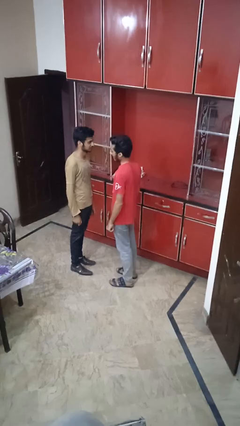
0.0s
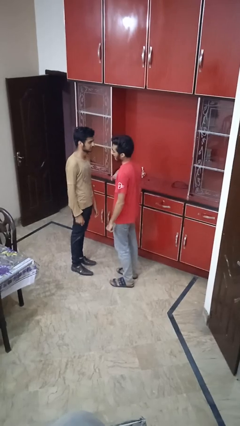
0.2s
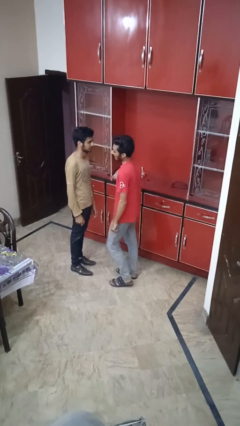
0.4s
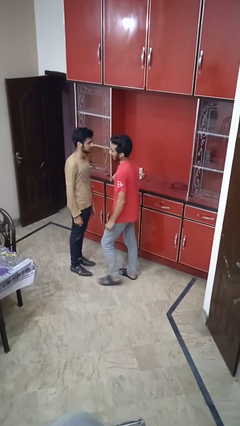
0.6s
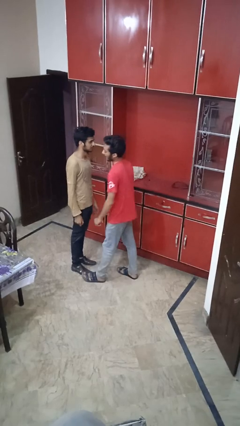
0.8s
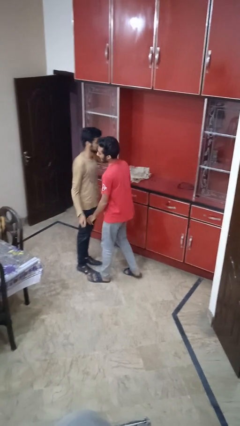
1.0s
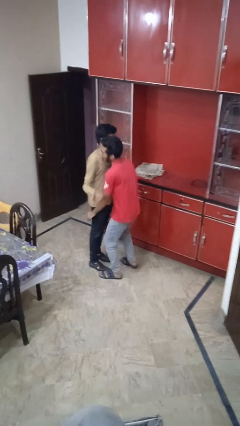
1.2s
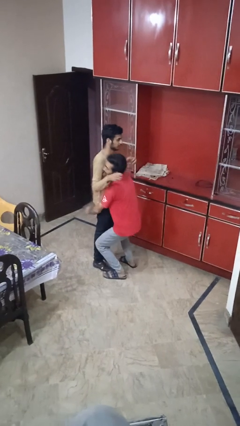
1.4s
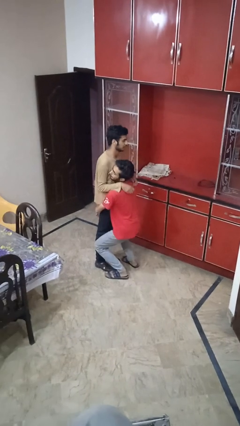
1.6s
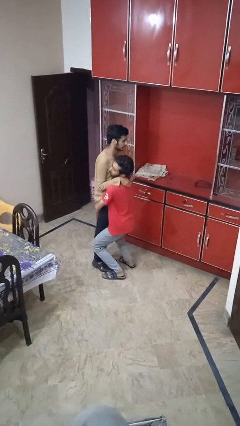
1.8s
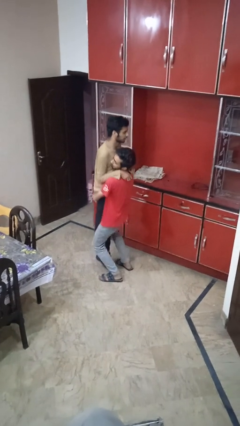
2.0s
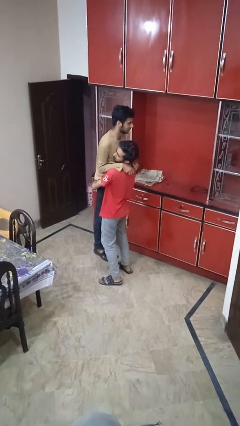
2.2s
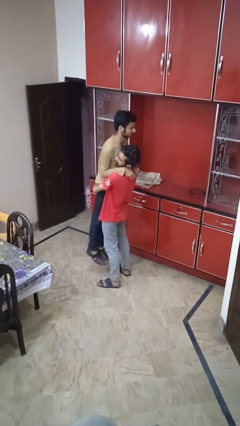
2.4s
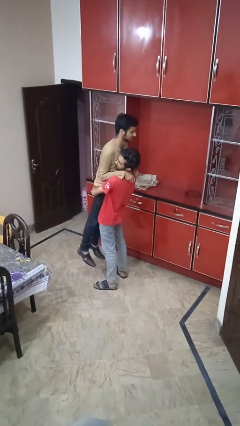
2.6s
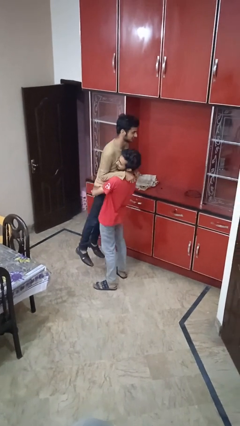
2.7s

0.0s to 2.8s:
person picks up person

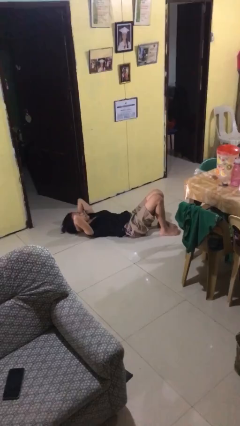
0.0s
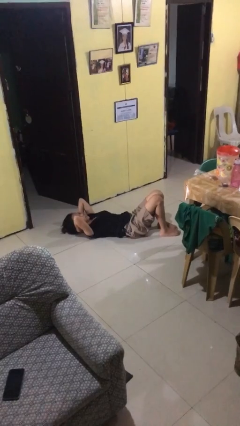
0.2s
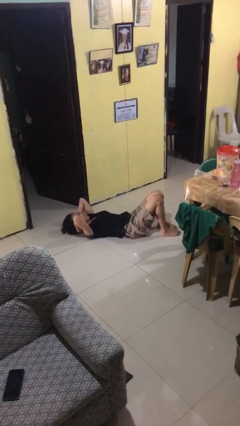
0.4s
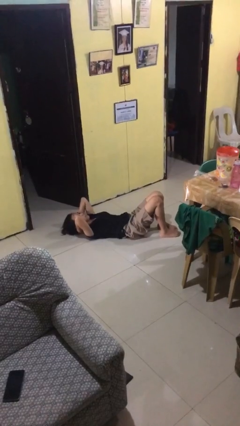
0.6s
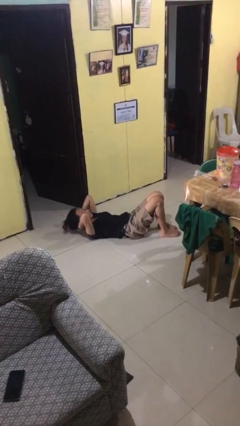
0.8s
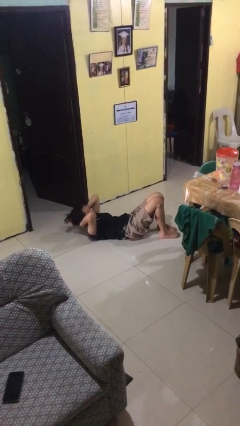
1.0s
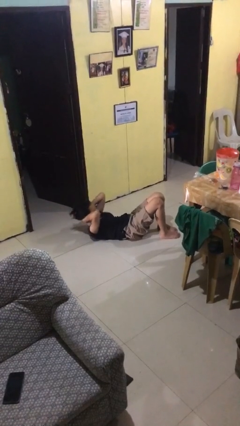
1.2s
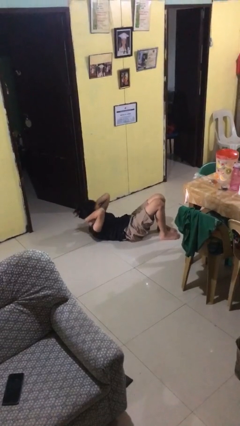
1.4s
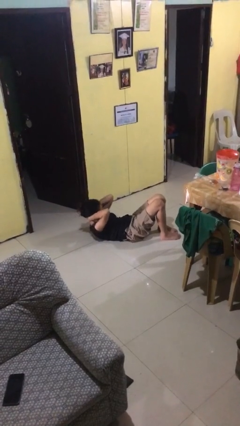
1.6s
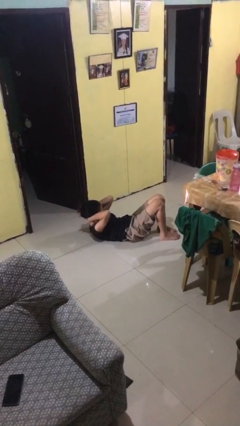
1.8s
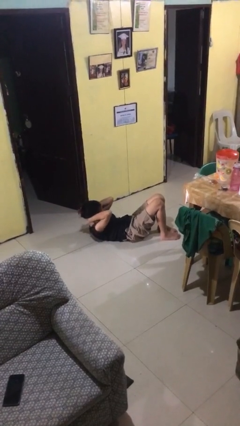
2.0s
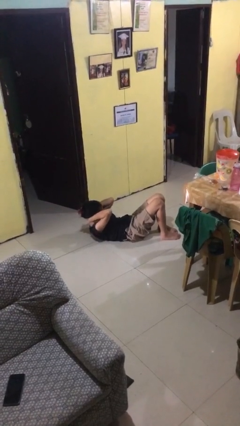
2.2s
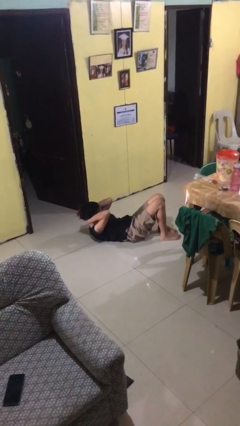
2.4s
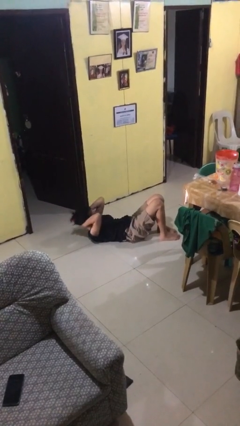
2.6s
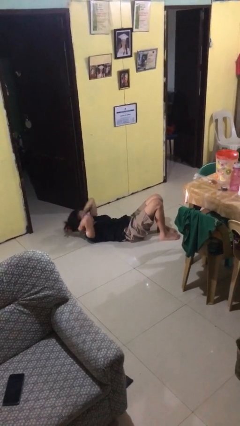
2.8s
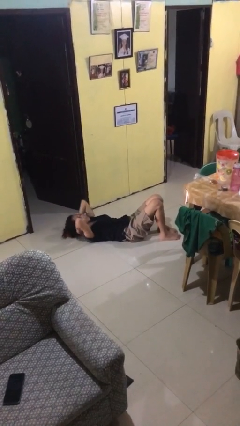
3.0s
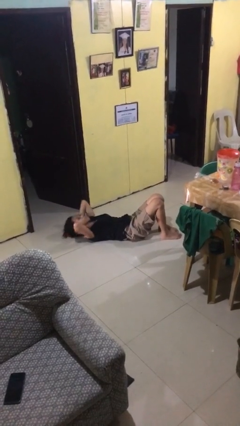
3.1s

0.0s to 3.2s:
person exercises with situp

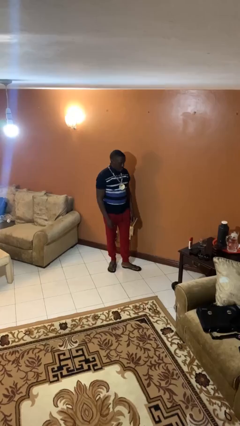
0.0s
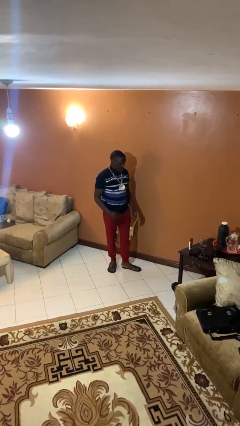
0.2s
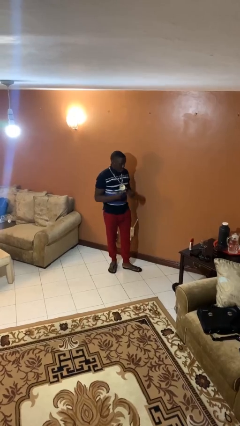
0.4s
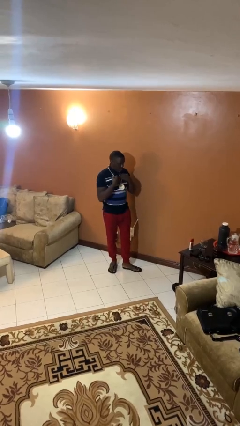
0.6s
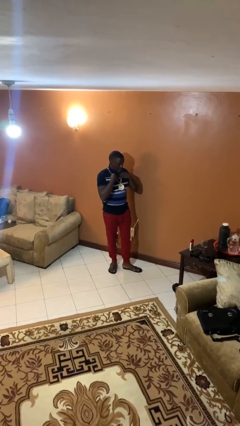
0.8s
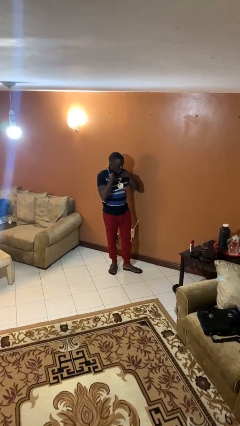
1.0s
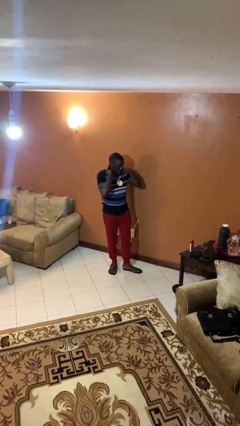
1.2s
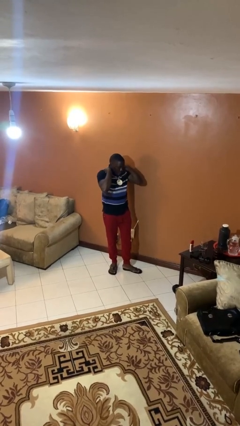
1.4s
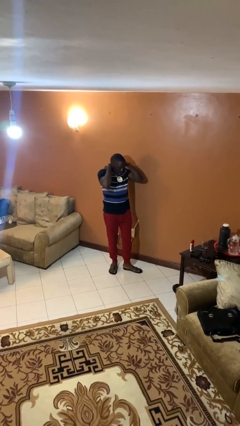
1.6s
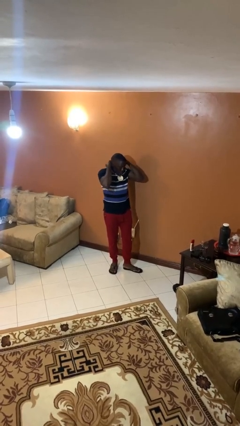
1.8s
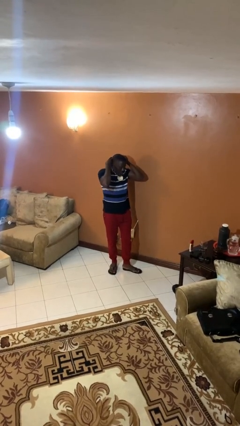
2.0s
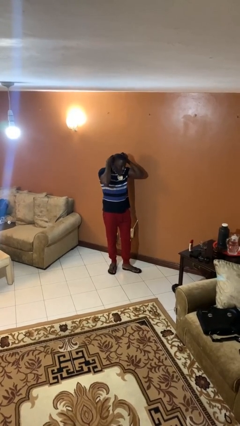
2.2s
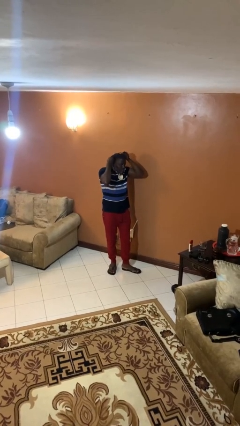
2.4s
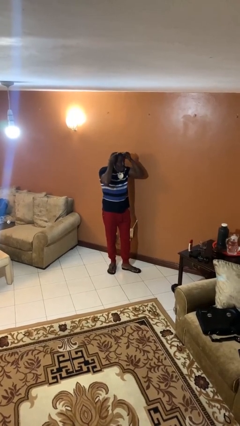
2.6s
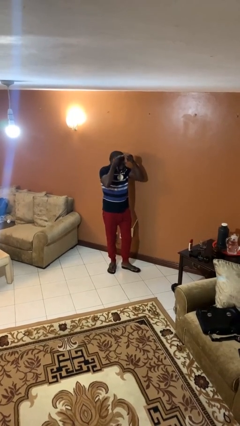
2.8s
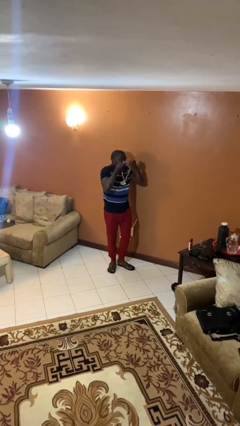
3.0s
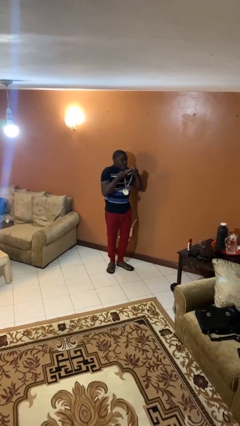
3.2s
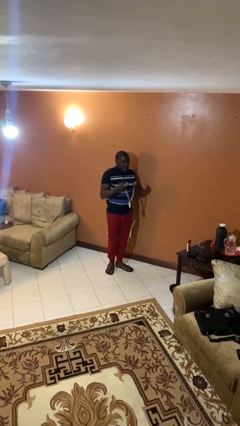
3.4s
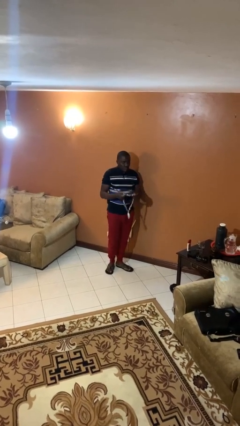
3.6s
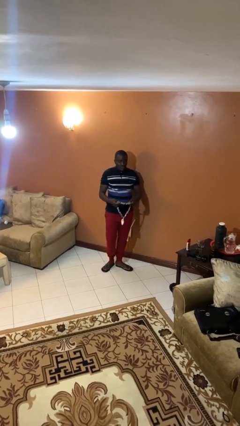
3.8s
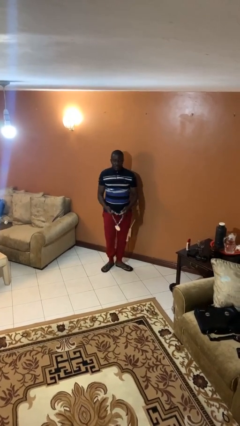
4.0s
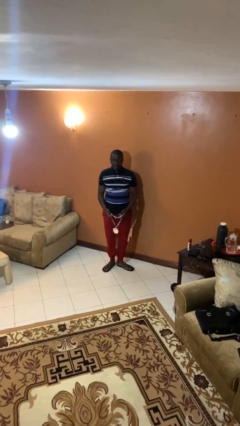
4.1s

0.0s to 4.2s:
person takes off necklace

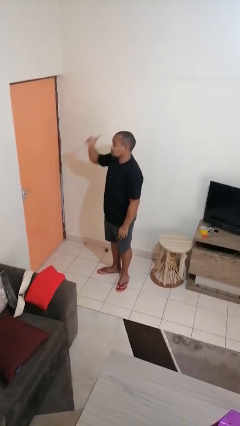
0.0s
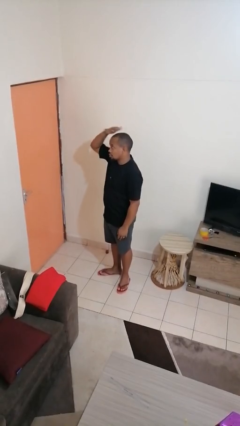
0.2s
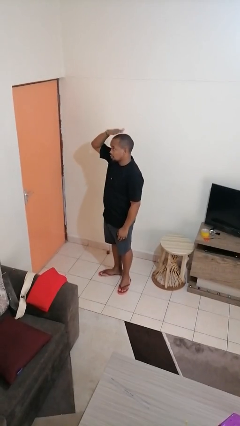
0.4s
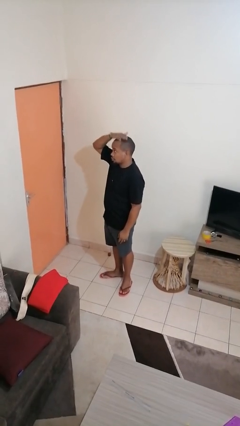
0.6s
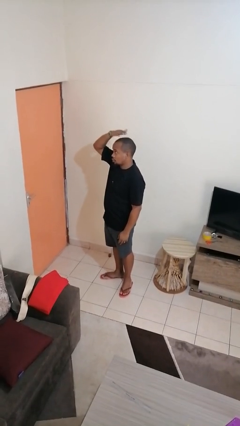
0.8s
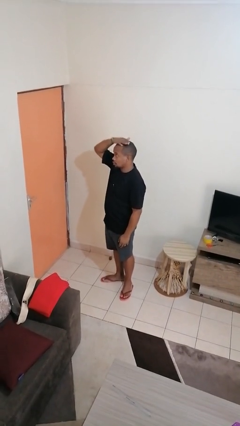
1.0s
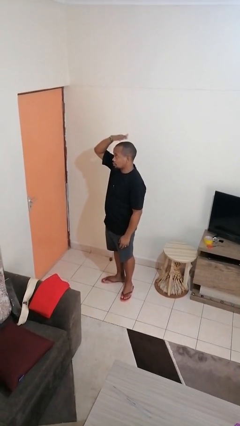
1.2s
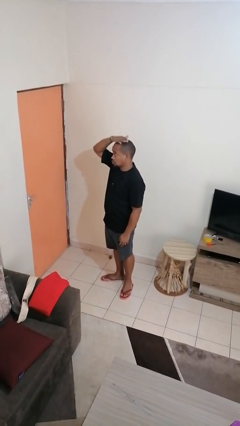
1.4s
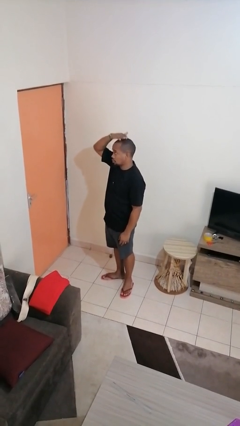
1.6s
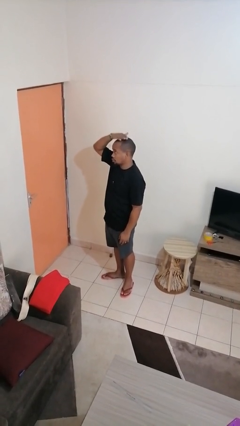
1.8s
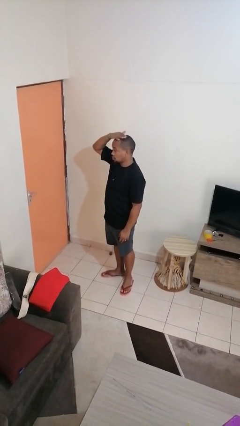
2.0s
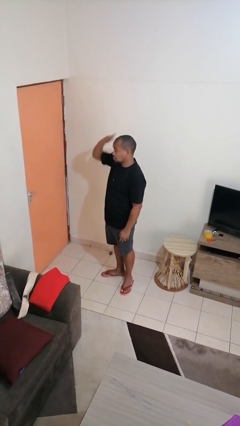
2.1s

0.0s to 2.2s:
person pats head

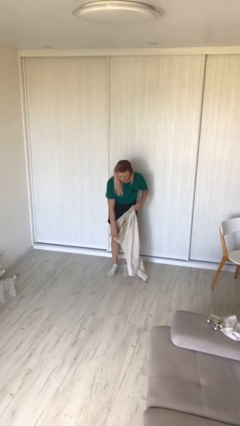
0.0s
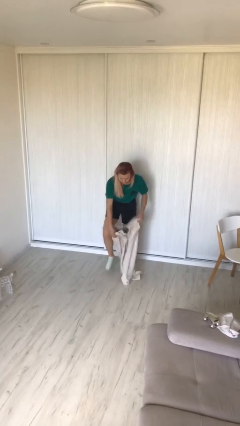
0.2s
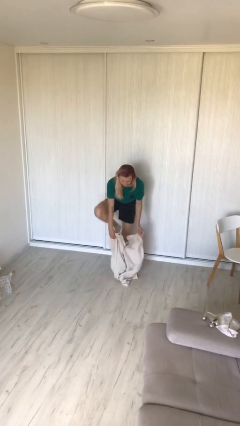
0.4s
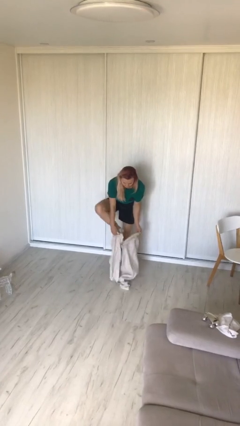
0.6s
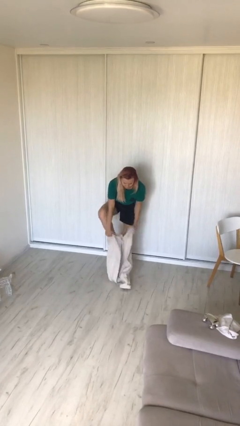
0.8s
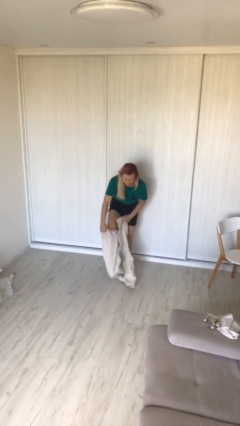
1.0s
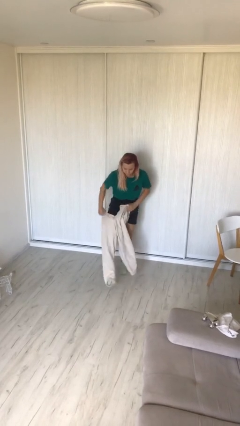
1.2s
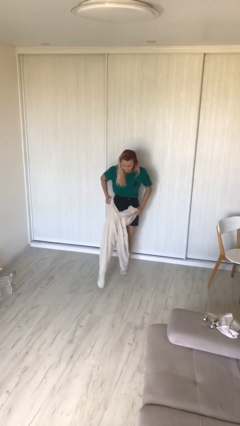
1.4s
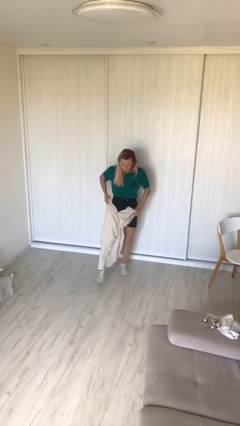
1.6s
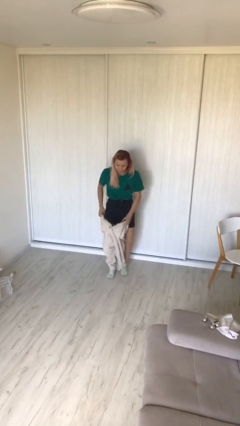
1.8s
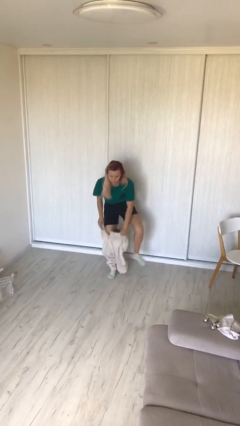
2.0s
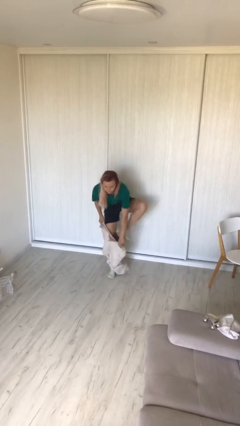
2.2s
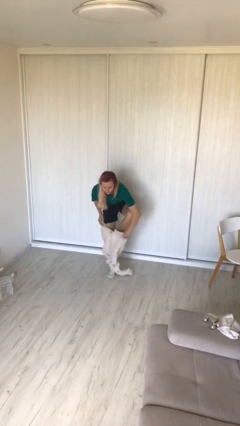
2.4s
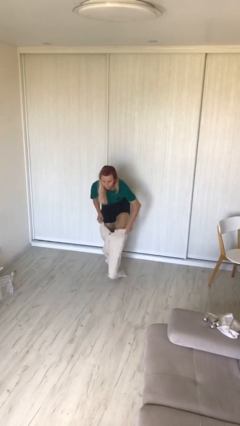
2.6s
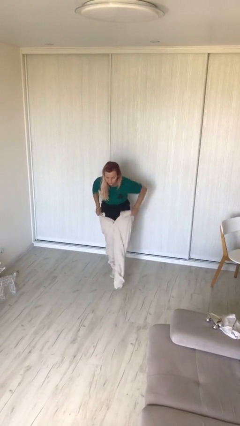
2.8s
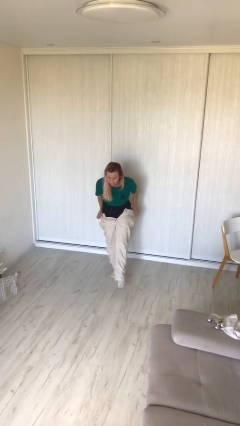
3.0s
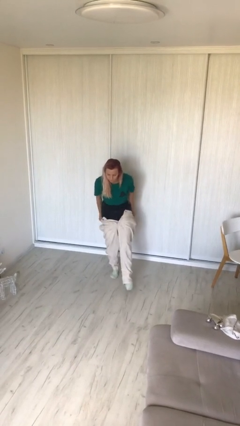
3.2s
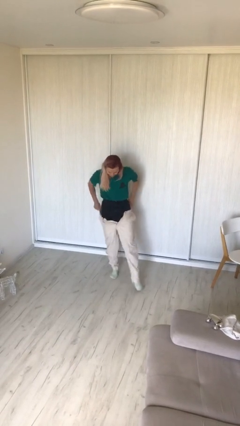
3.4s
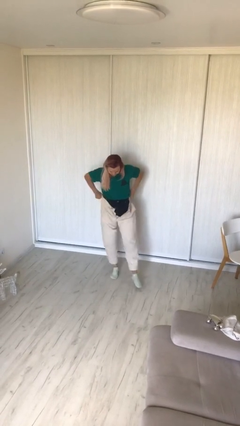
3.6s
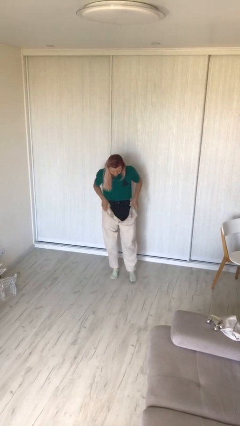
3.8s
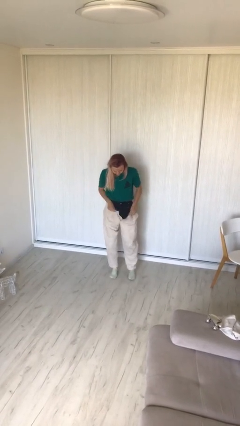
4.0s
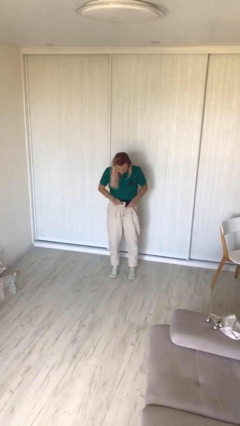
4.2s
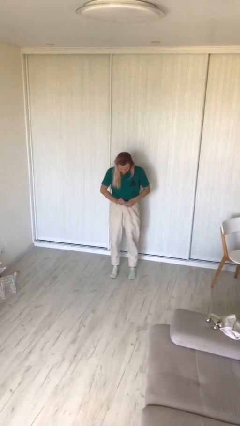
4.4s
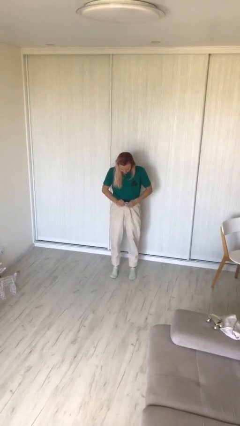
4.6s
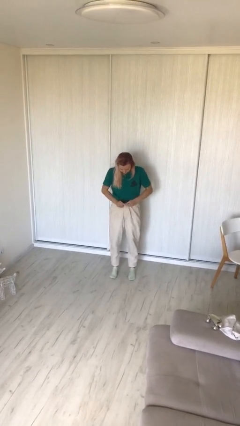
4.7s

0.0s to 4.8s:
person puts on pants

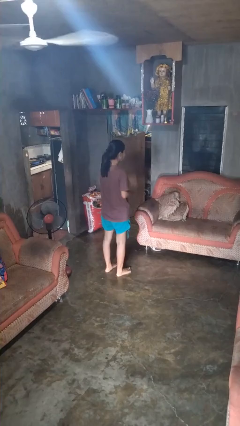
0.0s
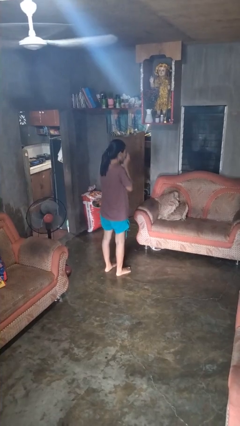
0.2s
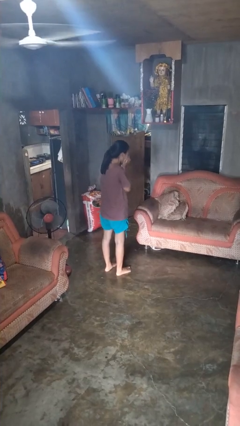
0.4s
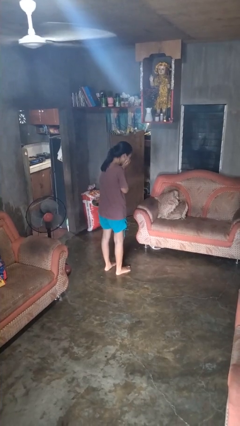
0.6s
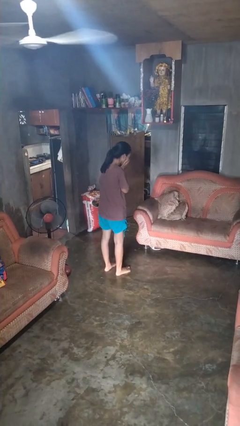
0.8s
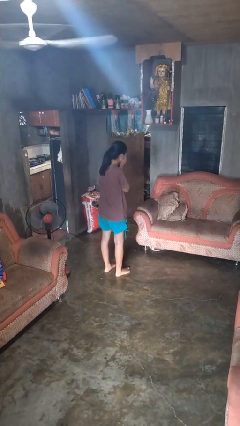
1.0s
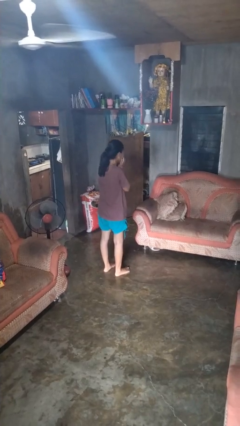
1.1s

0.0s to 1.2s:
person sneezes into hand
